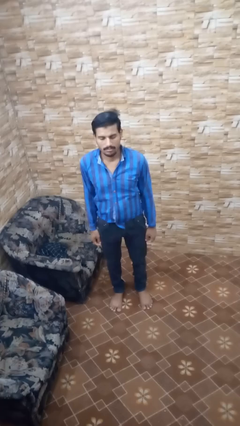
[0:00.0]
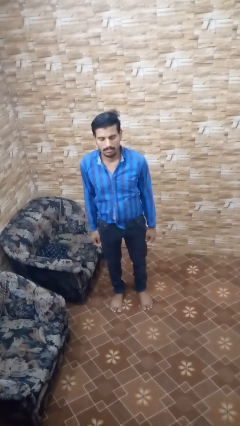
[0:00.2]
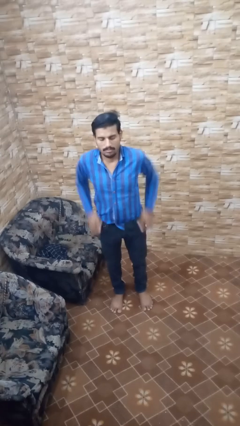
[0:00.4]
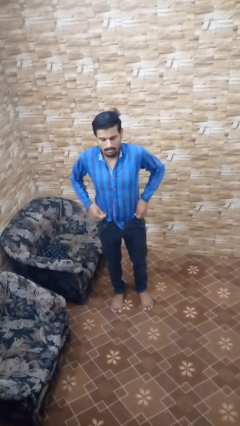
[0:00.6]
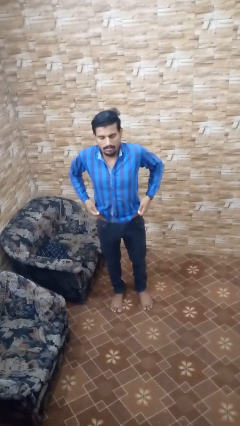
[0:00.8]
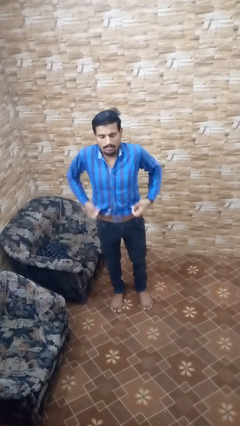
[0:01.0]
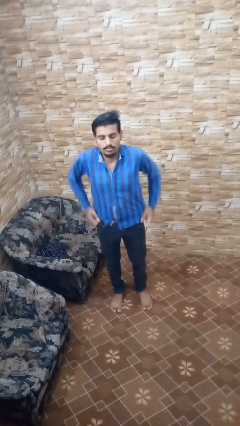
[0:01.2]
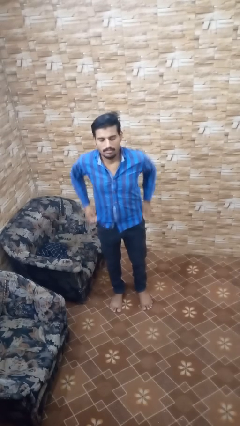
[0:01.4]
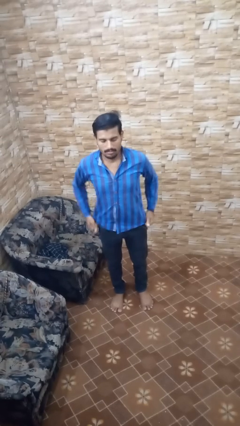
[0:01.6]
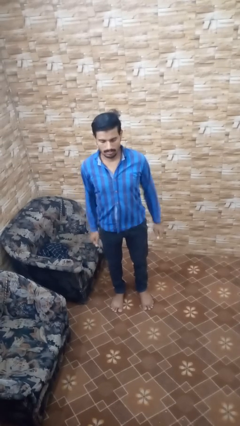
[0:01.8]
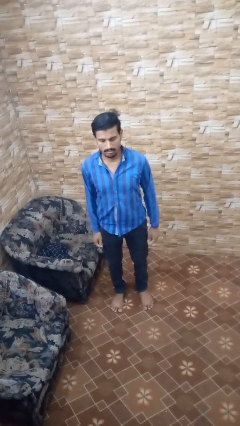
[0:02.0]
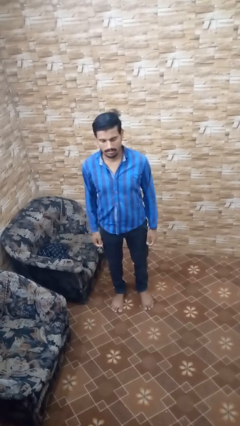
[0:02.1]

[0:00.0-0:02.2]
person untucks shirt

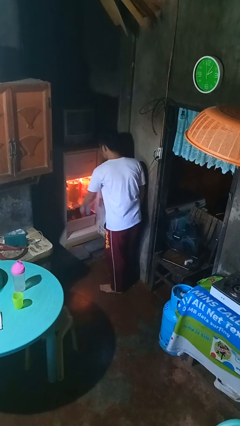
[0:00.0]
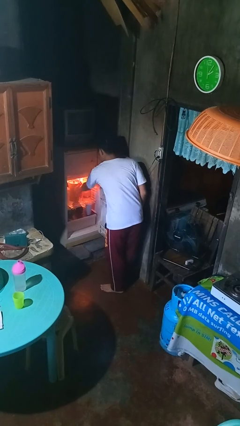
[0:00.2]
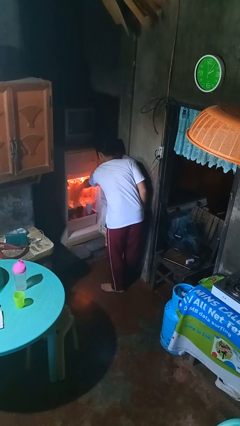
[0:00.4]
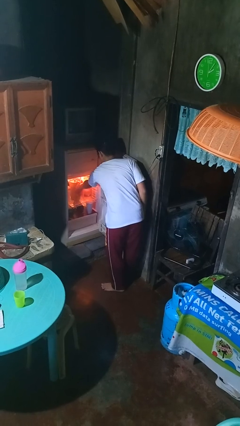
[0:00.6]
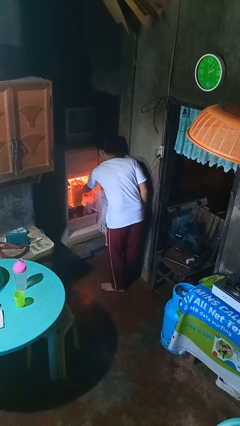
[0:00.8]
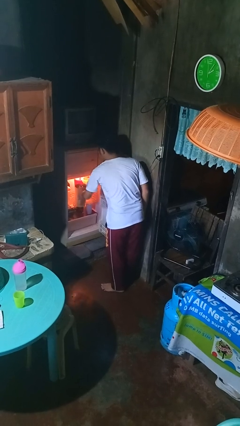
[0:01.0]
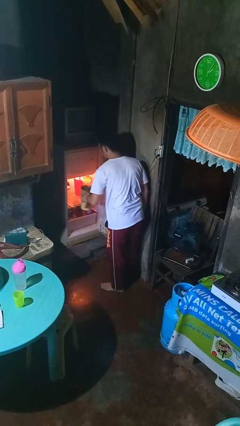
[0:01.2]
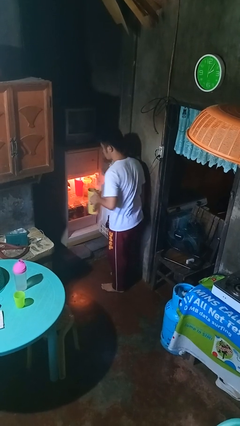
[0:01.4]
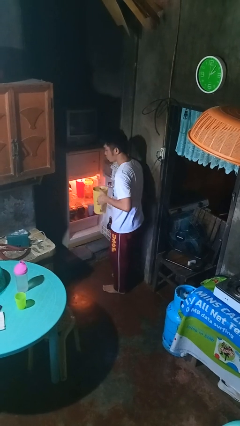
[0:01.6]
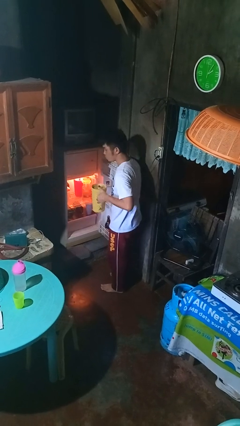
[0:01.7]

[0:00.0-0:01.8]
person takes object from refrigerator

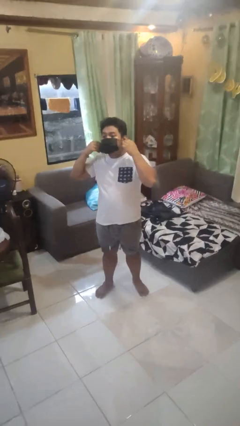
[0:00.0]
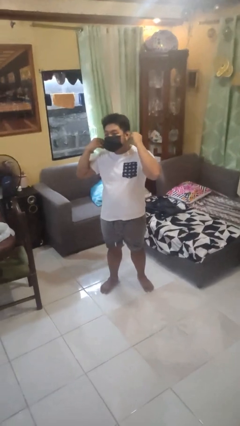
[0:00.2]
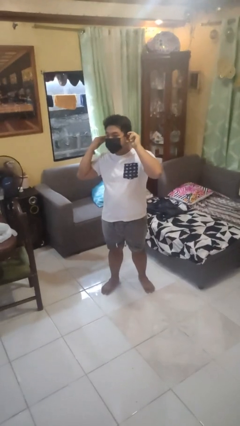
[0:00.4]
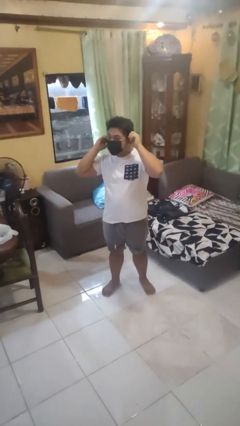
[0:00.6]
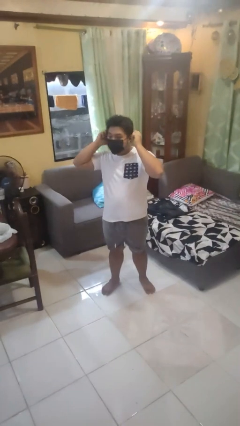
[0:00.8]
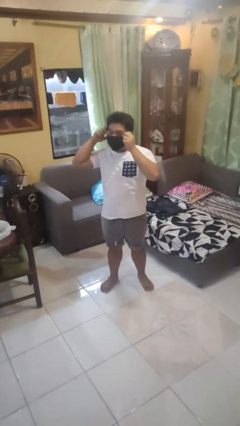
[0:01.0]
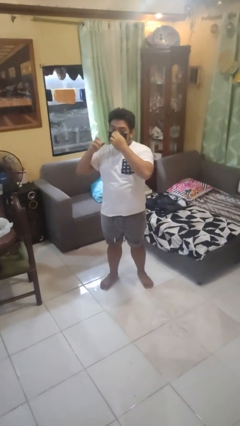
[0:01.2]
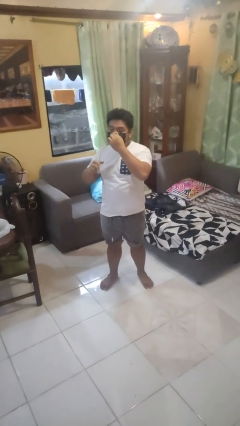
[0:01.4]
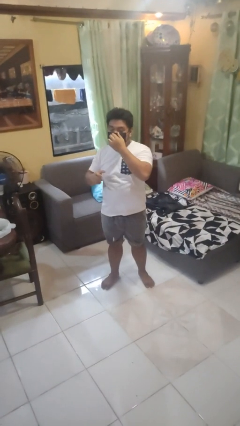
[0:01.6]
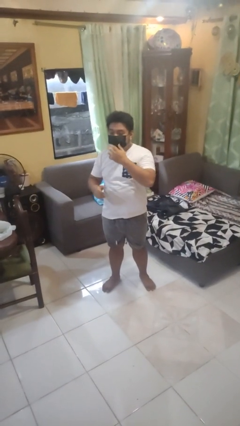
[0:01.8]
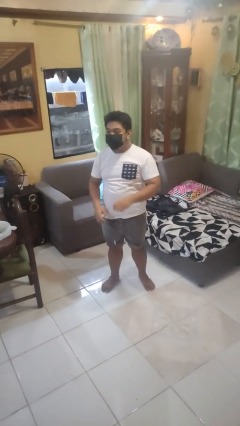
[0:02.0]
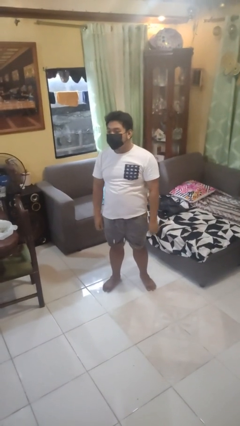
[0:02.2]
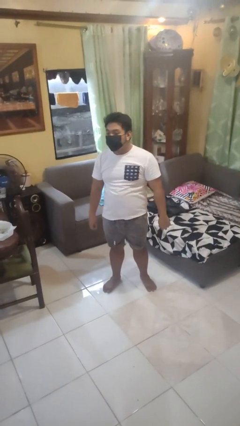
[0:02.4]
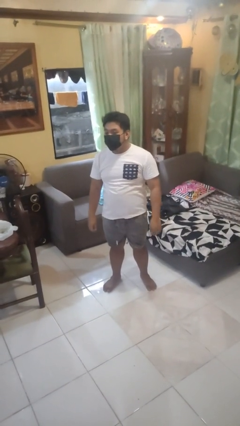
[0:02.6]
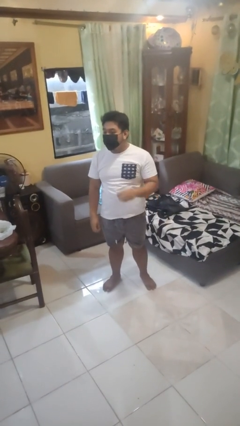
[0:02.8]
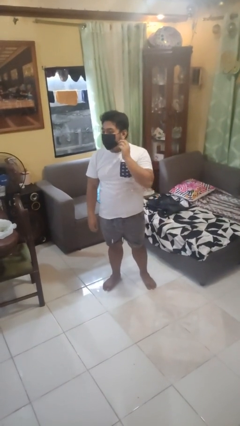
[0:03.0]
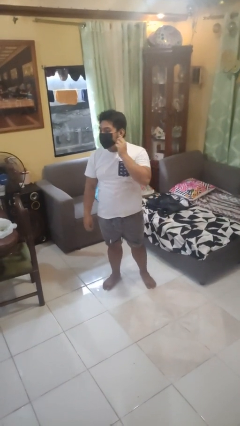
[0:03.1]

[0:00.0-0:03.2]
person puts on facemask

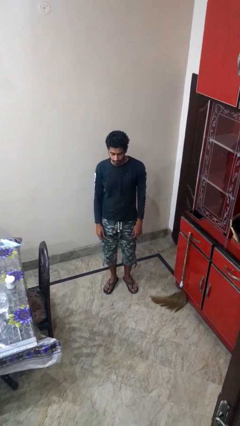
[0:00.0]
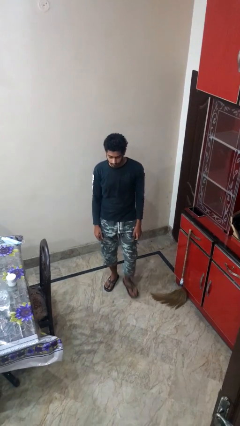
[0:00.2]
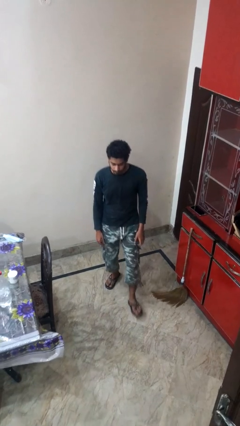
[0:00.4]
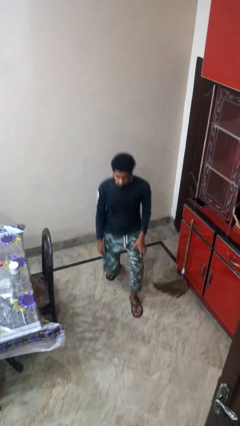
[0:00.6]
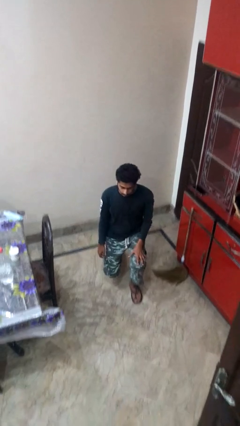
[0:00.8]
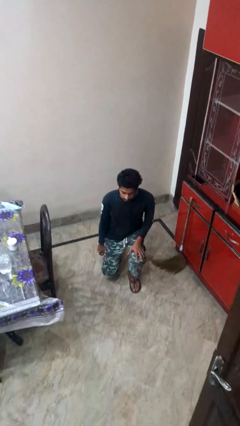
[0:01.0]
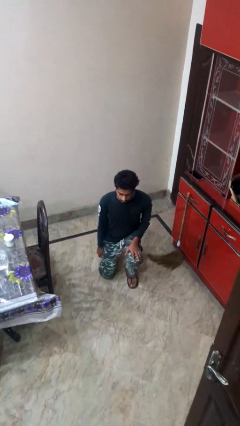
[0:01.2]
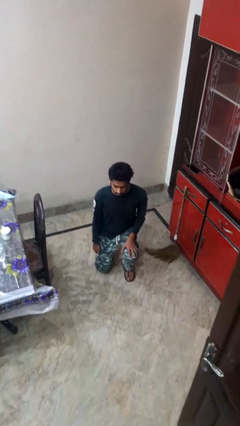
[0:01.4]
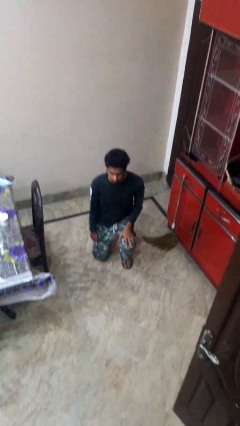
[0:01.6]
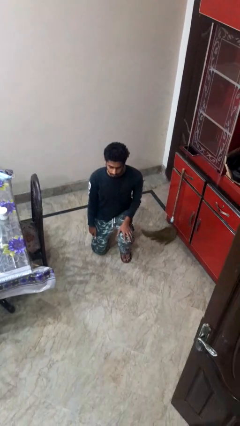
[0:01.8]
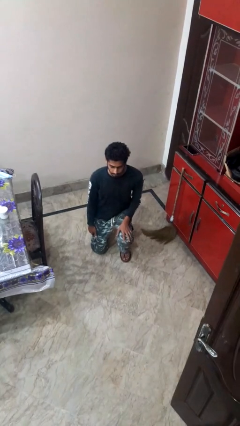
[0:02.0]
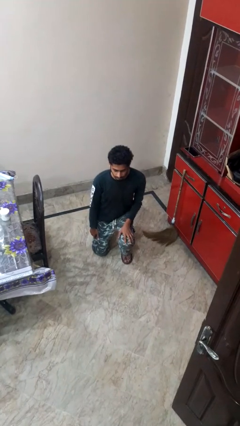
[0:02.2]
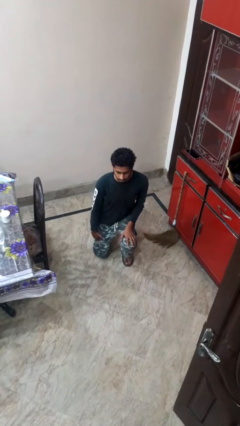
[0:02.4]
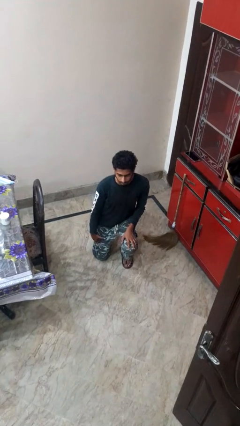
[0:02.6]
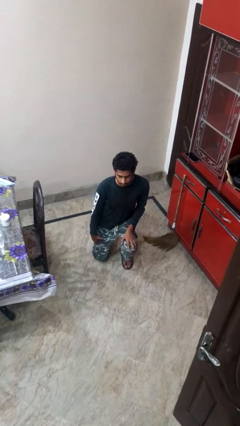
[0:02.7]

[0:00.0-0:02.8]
person kneels

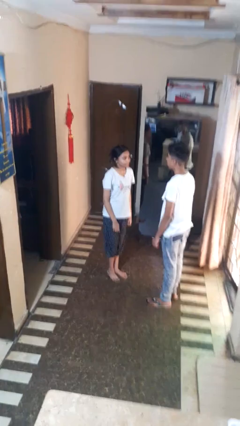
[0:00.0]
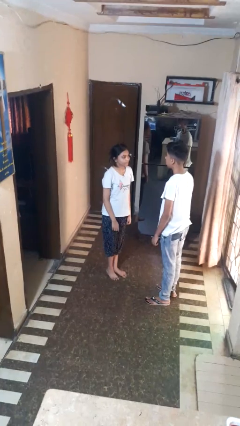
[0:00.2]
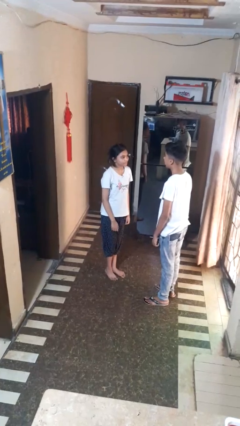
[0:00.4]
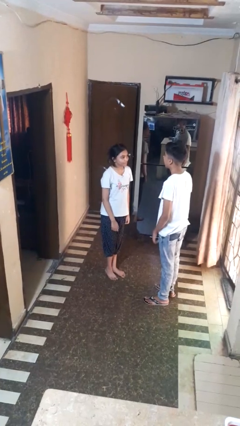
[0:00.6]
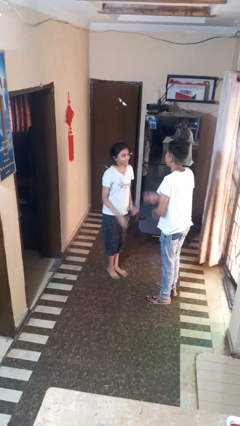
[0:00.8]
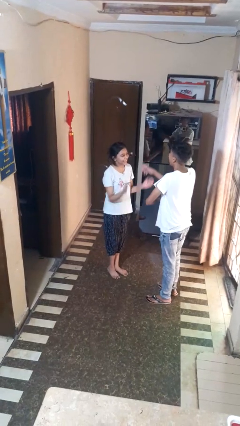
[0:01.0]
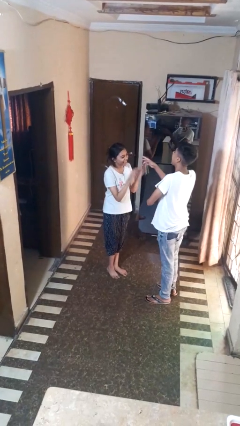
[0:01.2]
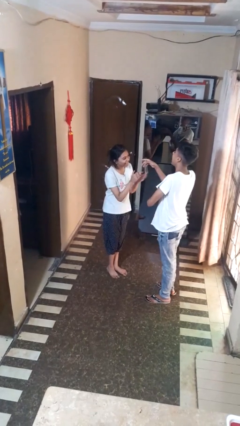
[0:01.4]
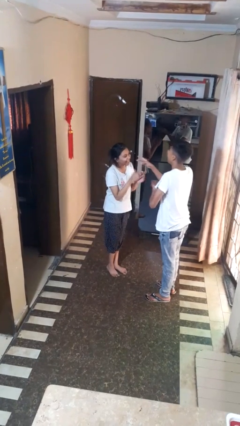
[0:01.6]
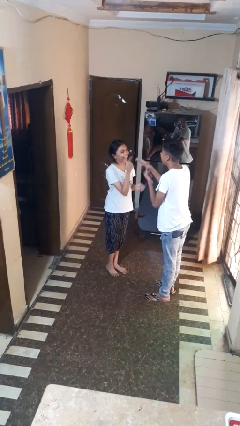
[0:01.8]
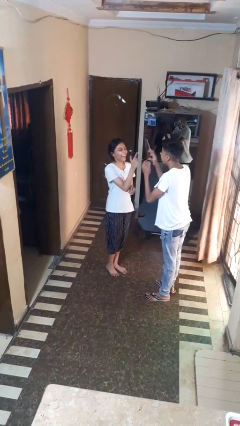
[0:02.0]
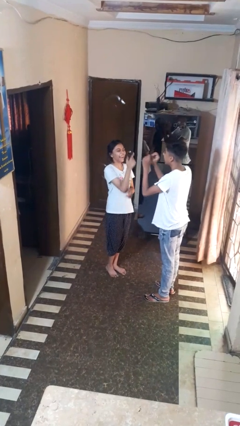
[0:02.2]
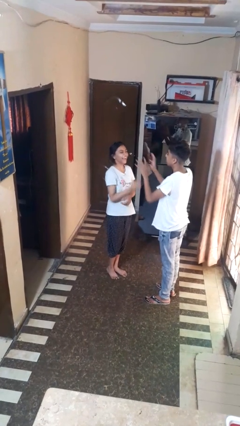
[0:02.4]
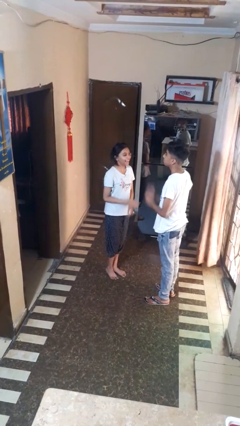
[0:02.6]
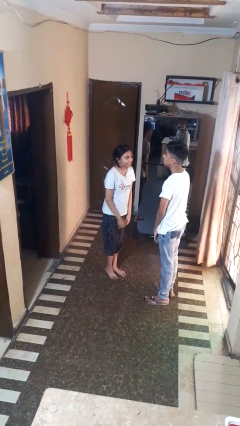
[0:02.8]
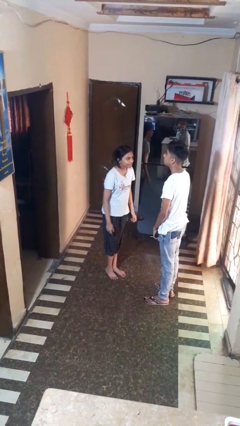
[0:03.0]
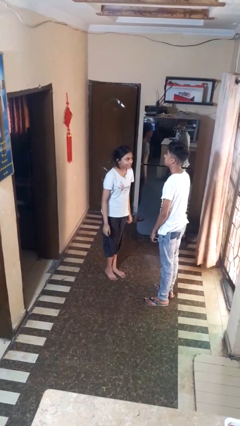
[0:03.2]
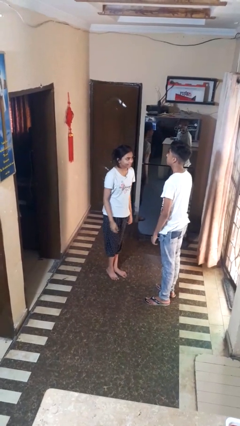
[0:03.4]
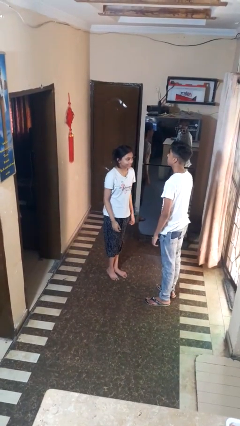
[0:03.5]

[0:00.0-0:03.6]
person laughs with person

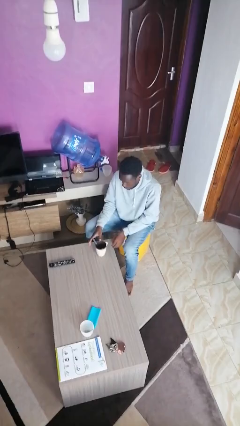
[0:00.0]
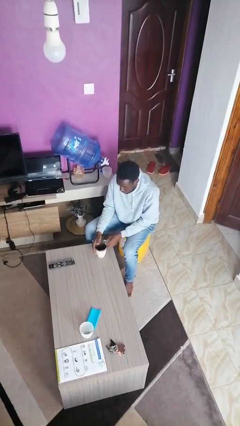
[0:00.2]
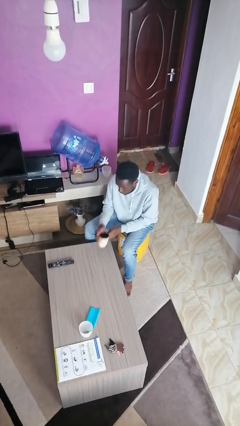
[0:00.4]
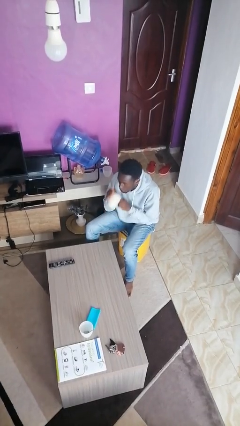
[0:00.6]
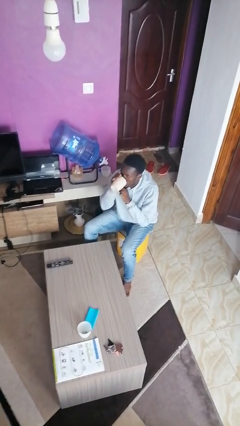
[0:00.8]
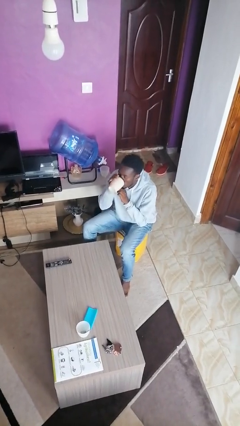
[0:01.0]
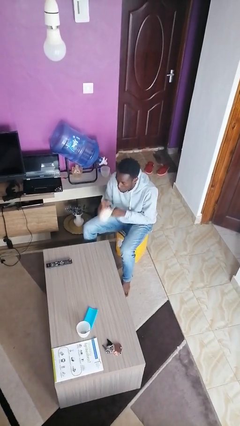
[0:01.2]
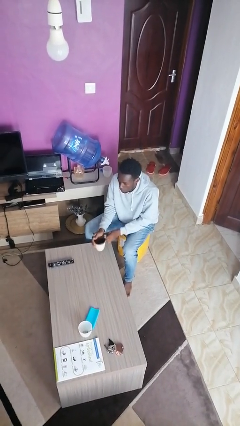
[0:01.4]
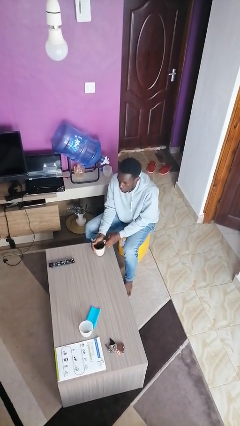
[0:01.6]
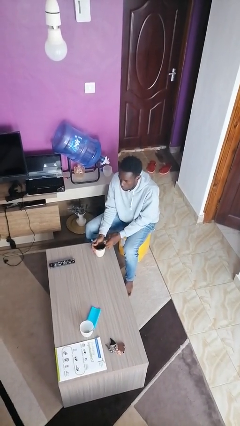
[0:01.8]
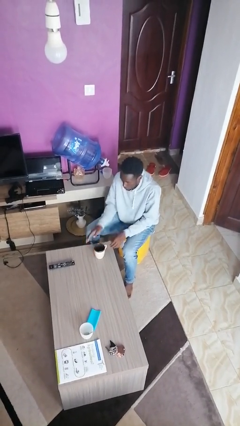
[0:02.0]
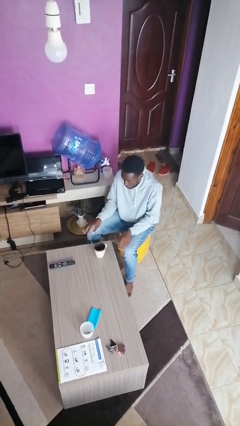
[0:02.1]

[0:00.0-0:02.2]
person drinks from mug

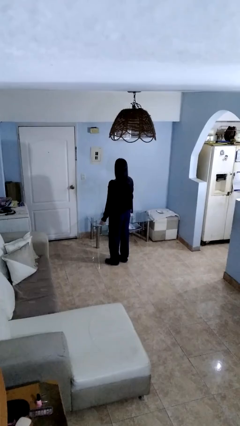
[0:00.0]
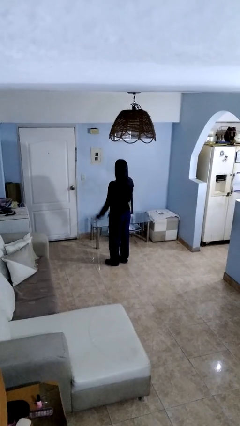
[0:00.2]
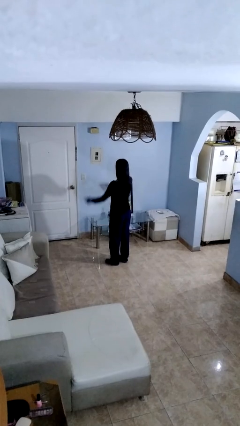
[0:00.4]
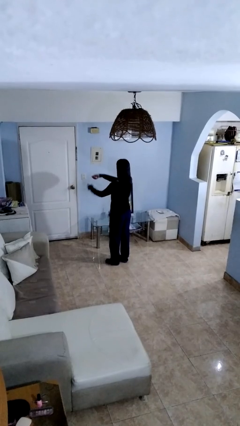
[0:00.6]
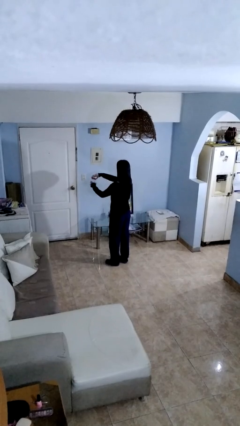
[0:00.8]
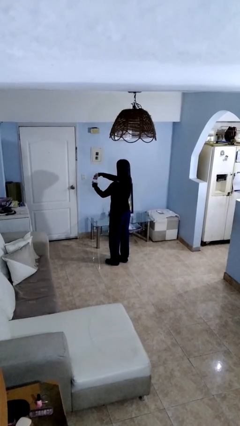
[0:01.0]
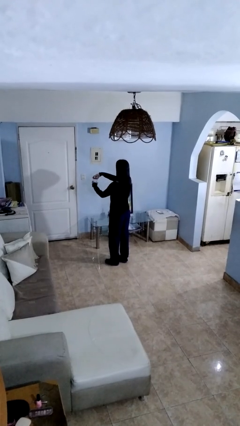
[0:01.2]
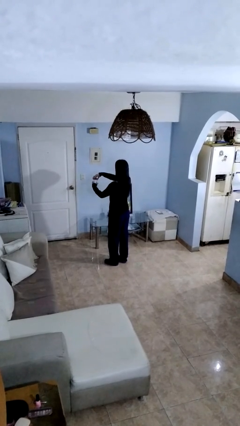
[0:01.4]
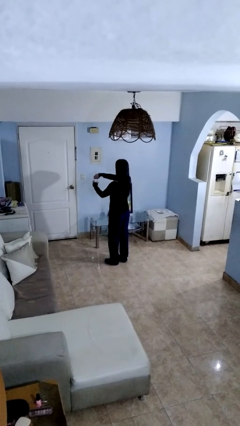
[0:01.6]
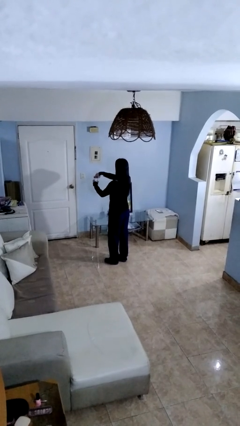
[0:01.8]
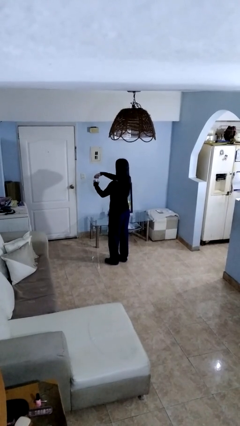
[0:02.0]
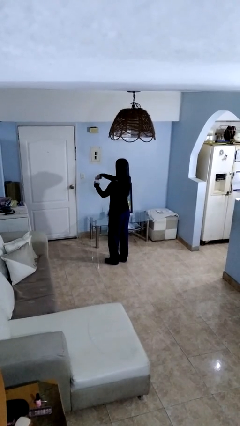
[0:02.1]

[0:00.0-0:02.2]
person closes jar
